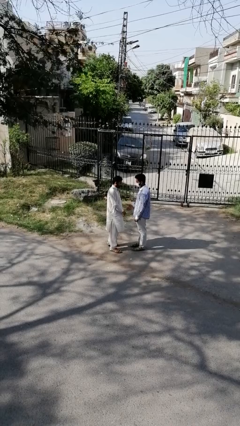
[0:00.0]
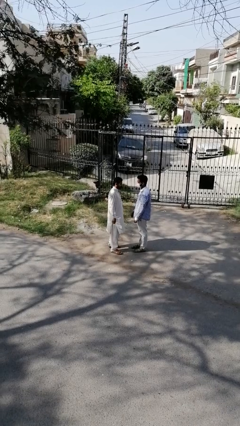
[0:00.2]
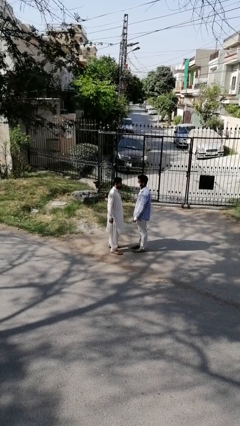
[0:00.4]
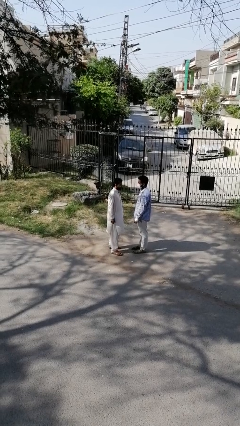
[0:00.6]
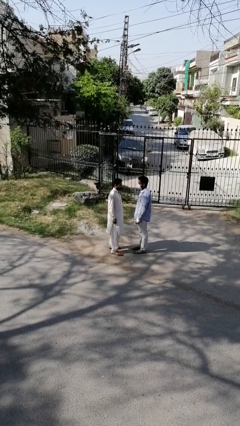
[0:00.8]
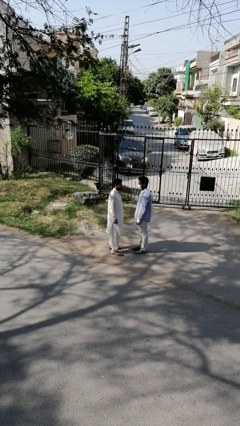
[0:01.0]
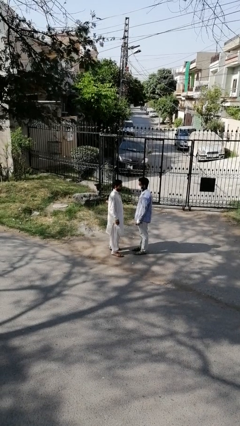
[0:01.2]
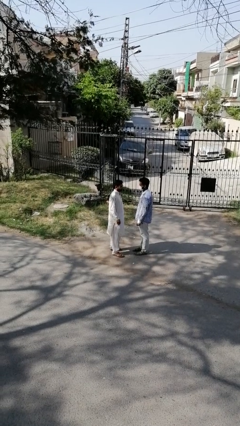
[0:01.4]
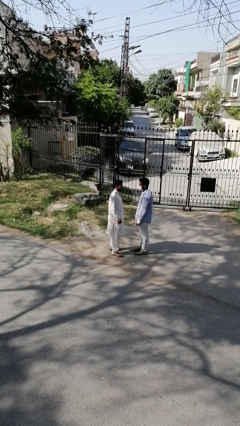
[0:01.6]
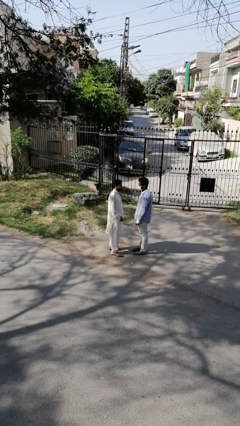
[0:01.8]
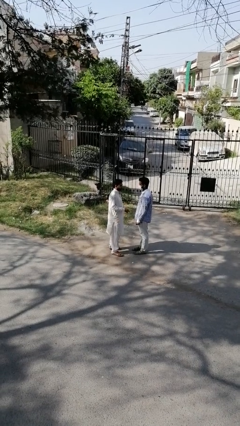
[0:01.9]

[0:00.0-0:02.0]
person highfives hand

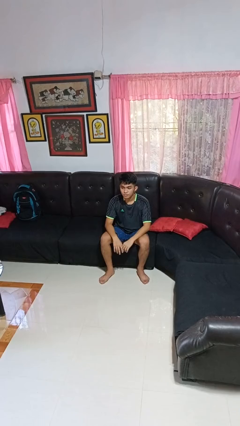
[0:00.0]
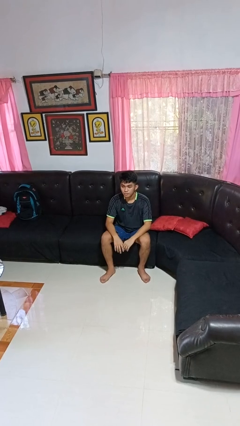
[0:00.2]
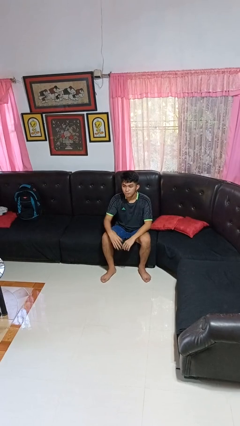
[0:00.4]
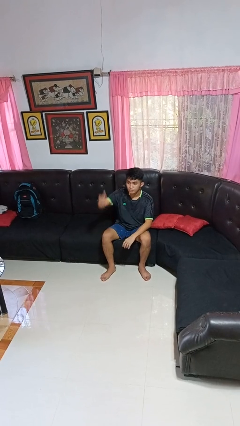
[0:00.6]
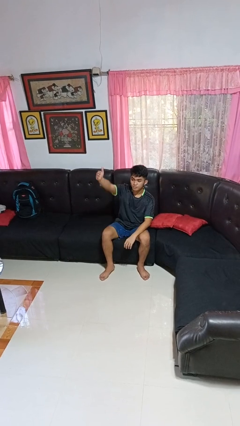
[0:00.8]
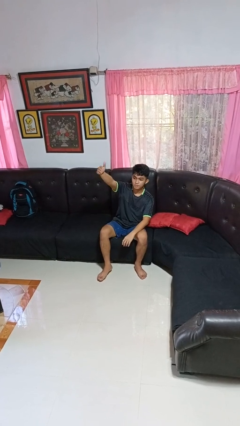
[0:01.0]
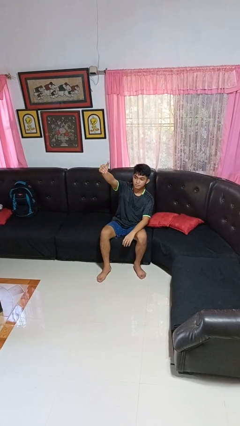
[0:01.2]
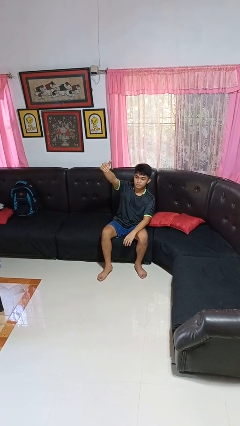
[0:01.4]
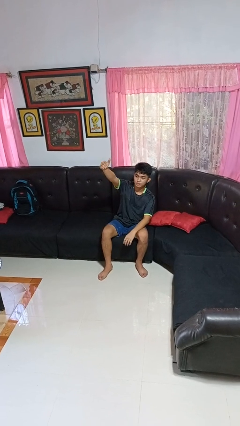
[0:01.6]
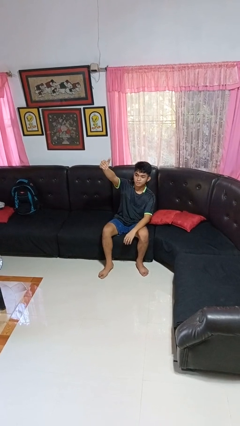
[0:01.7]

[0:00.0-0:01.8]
person gestures come here

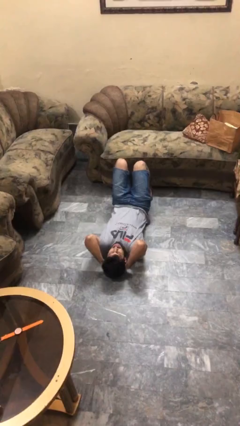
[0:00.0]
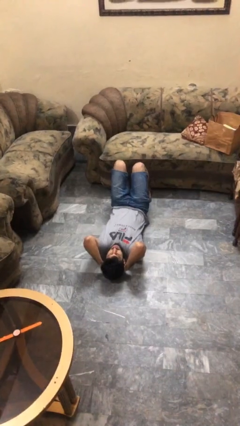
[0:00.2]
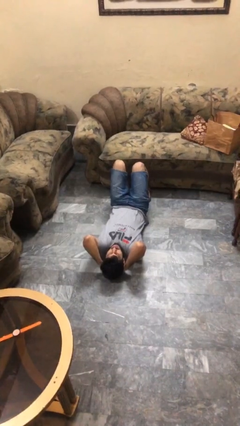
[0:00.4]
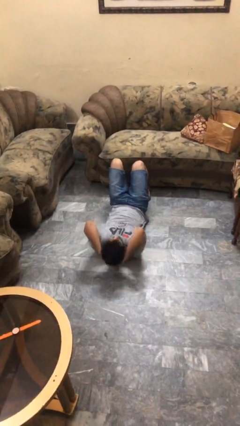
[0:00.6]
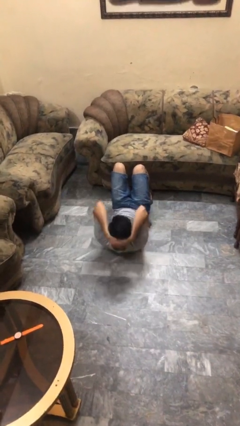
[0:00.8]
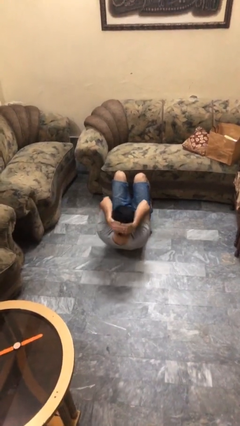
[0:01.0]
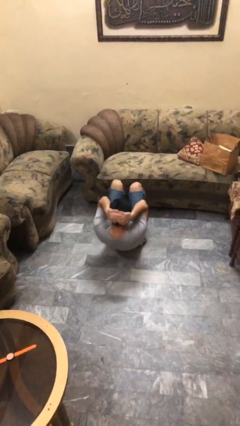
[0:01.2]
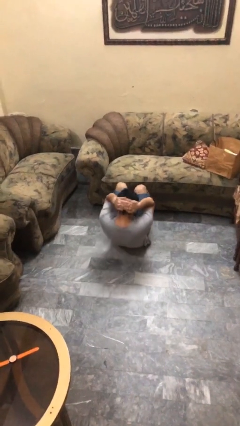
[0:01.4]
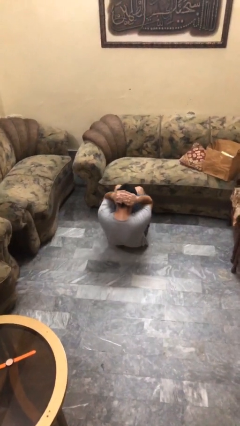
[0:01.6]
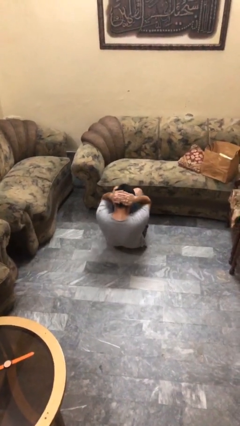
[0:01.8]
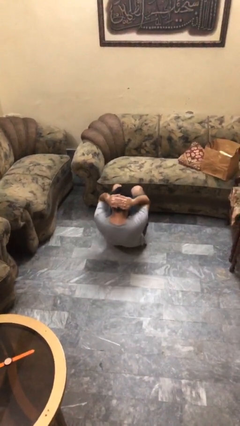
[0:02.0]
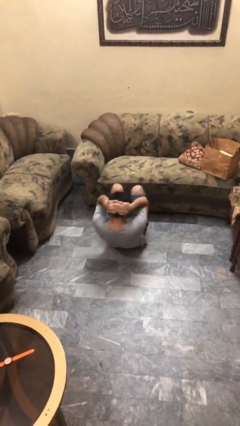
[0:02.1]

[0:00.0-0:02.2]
person exercises with situp

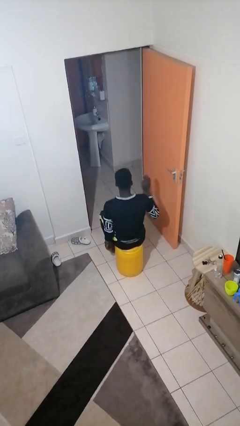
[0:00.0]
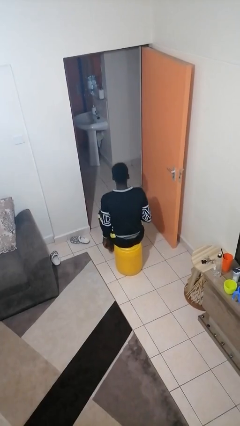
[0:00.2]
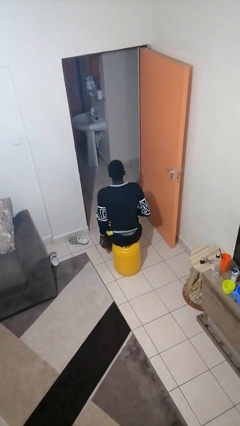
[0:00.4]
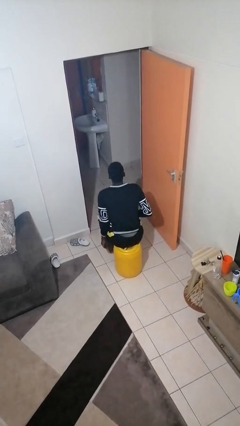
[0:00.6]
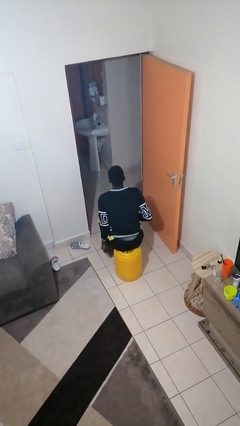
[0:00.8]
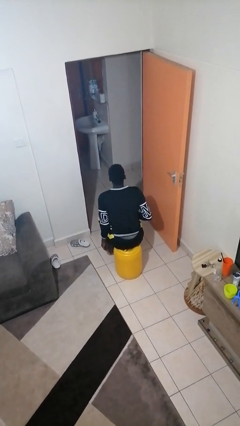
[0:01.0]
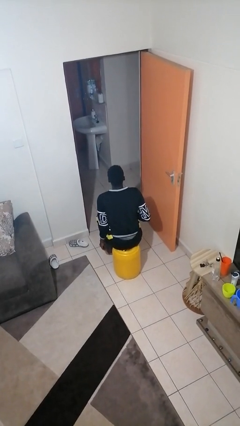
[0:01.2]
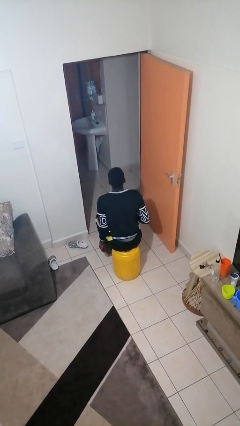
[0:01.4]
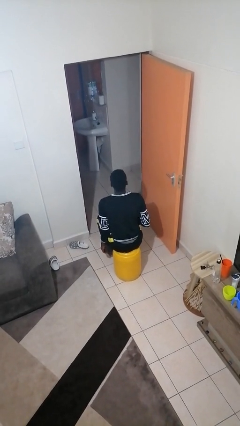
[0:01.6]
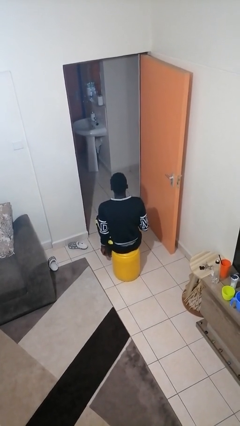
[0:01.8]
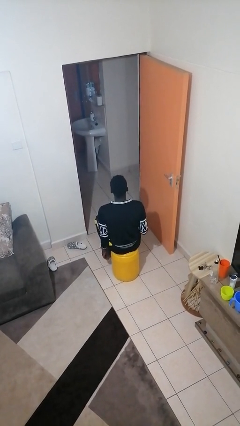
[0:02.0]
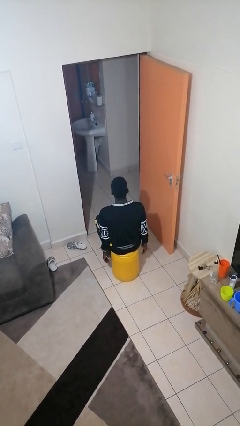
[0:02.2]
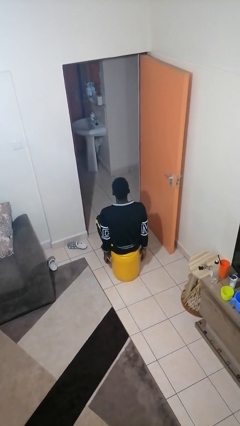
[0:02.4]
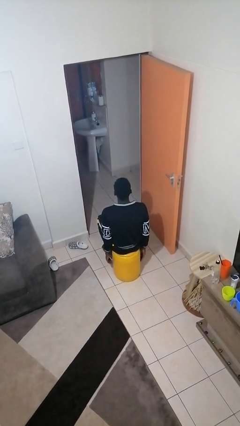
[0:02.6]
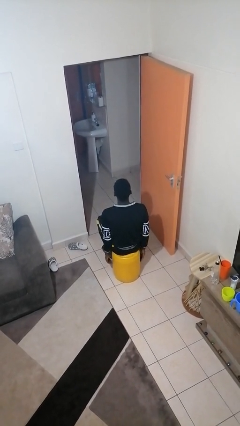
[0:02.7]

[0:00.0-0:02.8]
person slaps hands on thighs

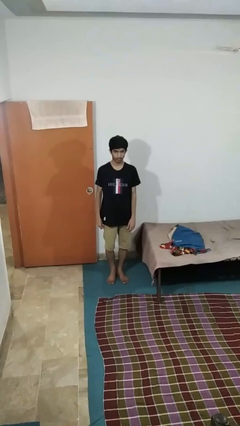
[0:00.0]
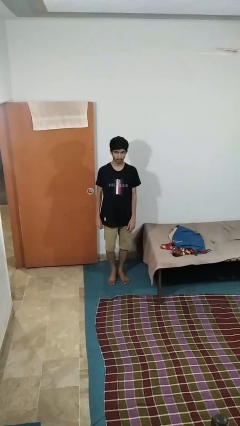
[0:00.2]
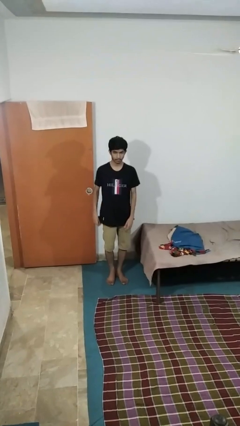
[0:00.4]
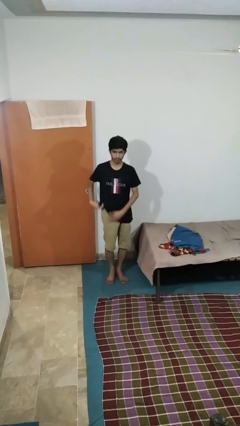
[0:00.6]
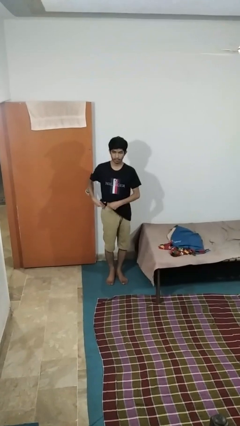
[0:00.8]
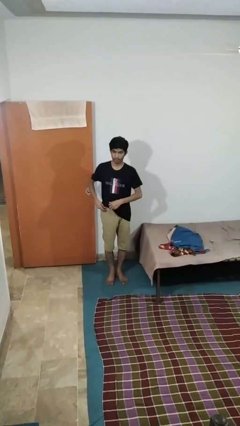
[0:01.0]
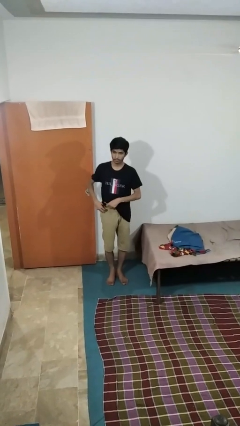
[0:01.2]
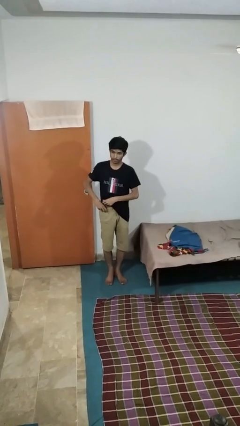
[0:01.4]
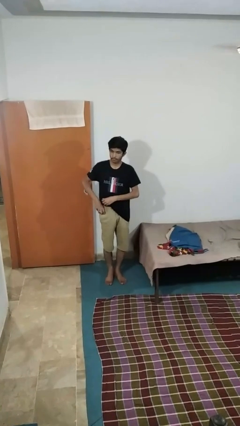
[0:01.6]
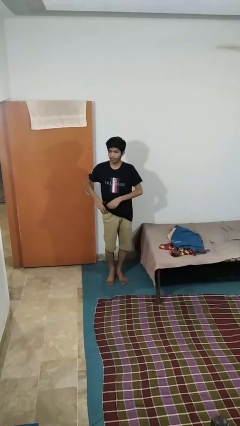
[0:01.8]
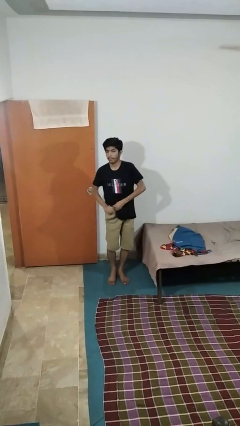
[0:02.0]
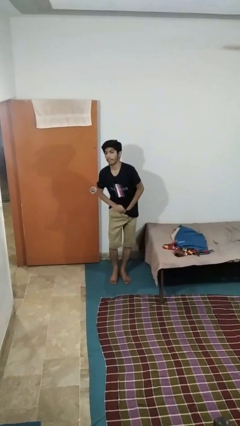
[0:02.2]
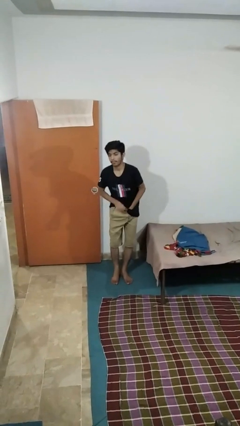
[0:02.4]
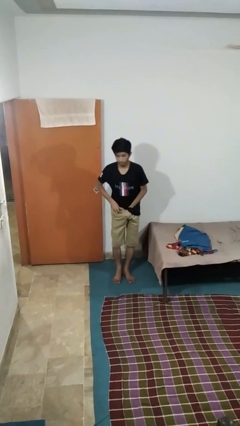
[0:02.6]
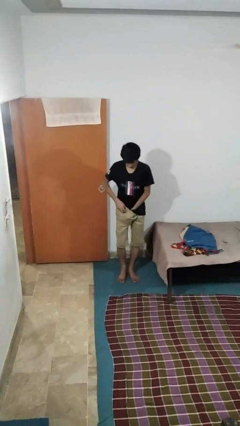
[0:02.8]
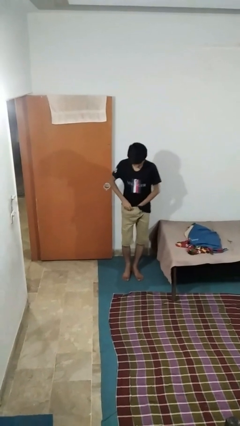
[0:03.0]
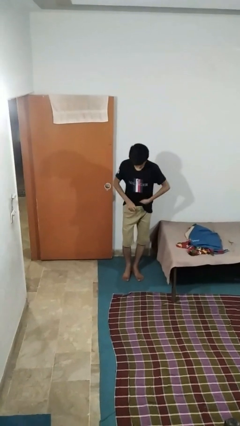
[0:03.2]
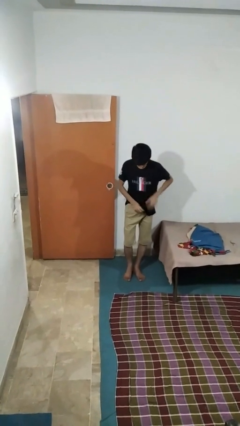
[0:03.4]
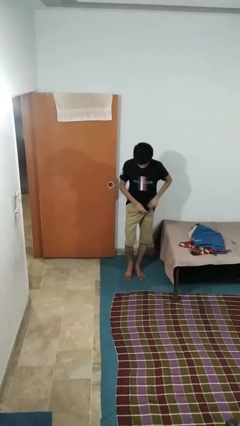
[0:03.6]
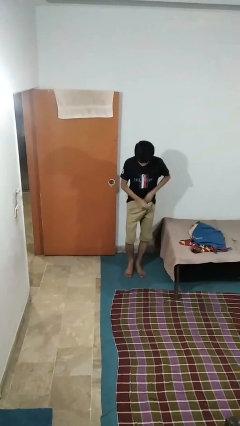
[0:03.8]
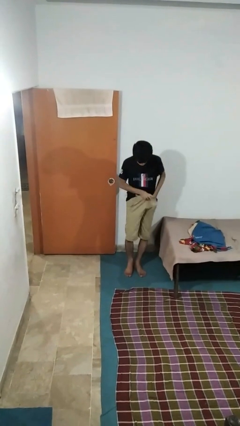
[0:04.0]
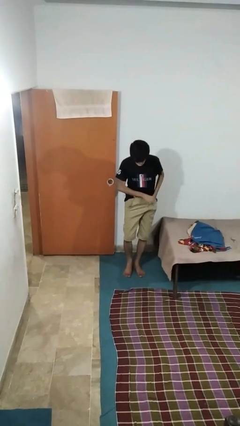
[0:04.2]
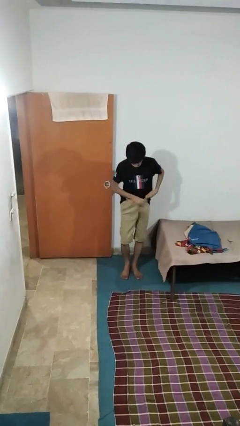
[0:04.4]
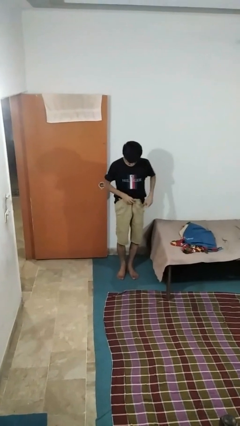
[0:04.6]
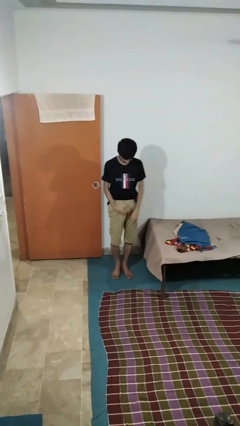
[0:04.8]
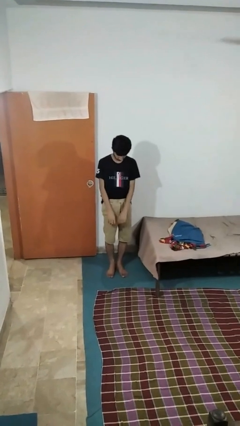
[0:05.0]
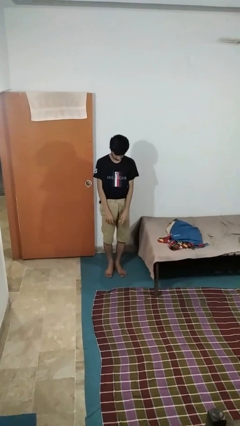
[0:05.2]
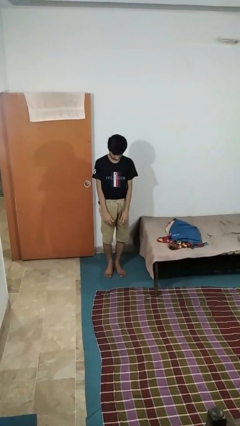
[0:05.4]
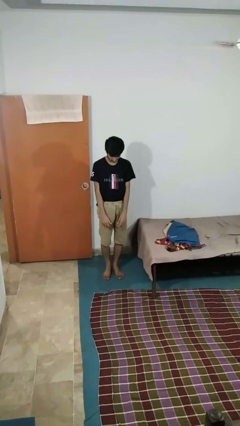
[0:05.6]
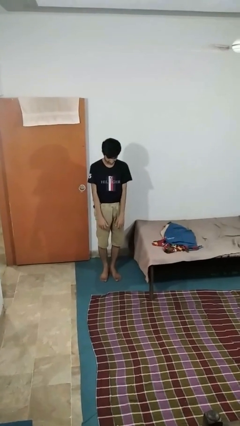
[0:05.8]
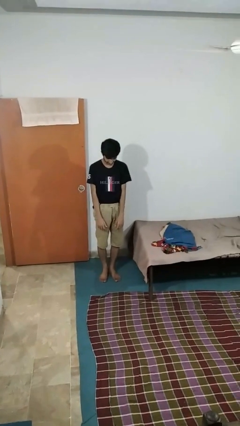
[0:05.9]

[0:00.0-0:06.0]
person tucks in shirt

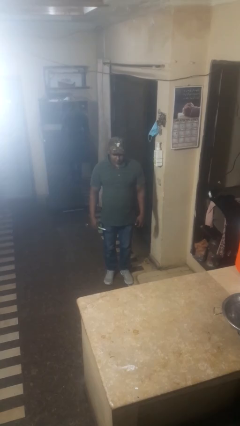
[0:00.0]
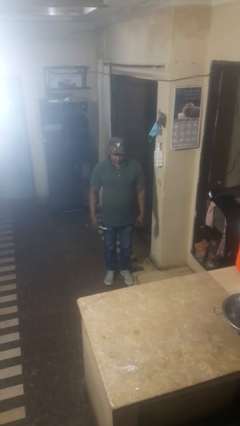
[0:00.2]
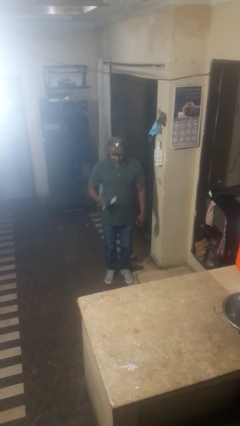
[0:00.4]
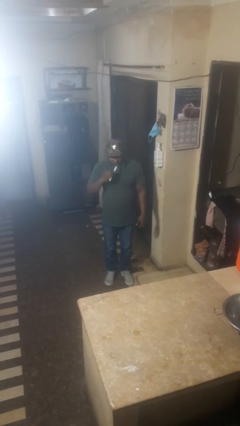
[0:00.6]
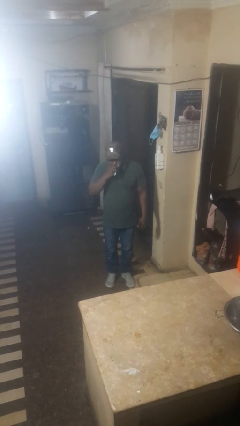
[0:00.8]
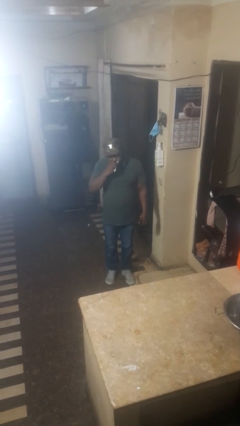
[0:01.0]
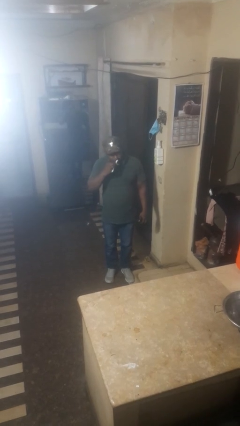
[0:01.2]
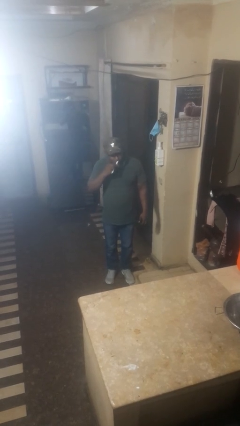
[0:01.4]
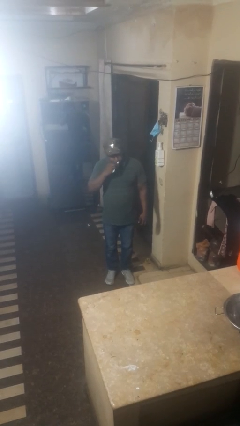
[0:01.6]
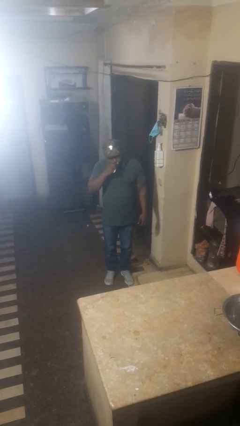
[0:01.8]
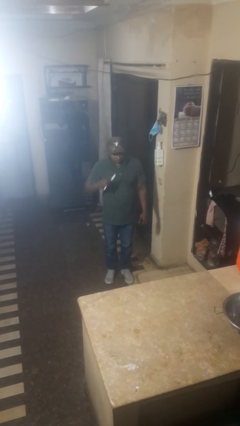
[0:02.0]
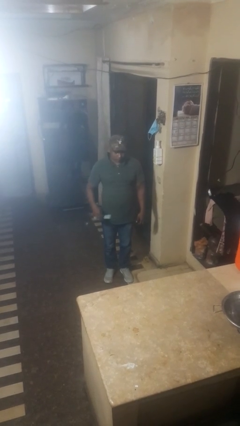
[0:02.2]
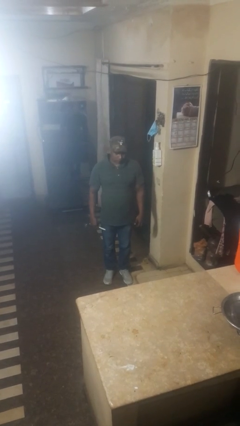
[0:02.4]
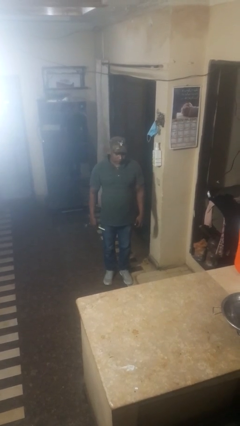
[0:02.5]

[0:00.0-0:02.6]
person brushes teeth
